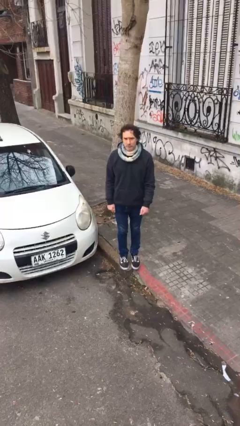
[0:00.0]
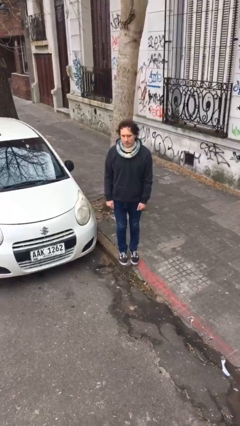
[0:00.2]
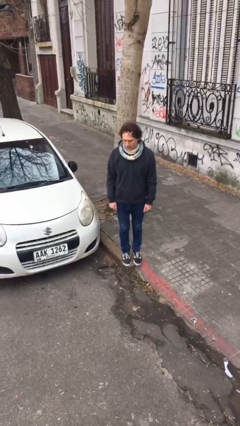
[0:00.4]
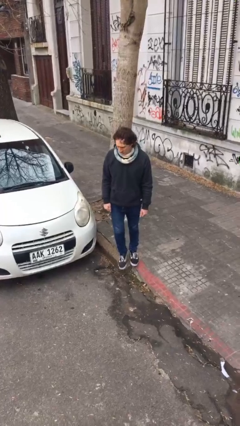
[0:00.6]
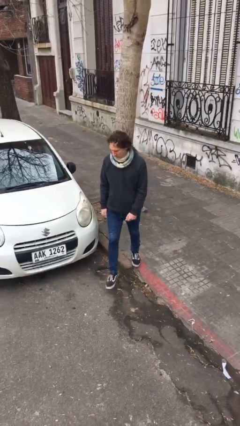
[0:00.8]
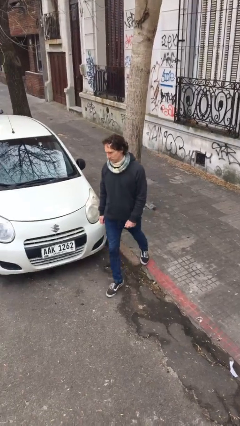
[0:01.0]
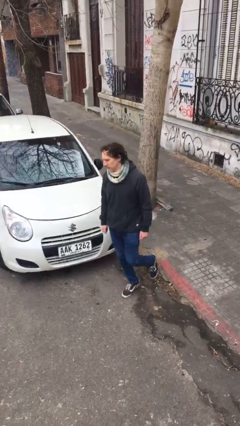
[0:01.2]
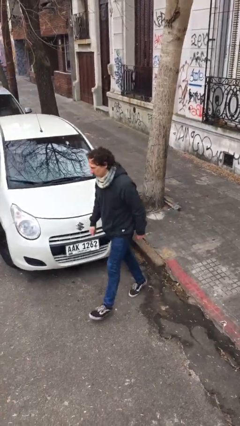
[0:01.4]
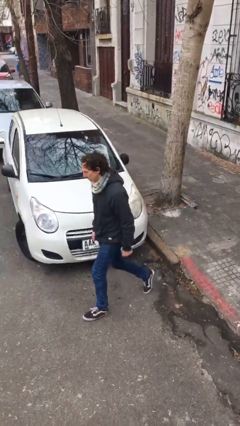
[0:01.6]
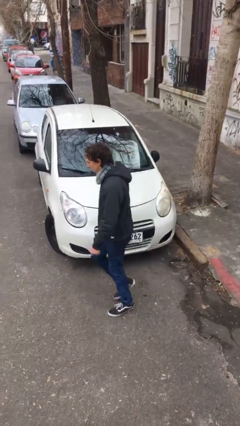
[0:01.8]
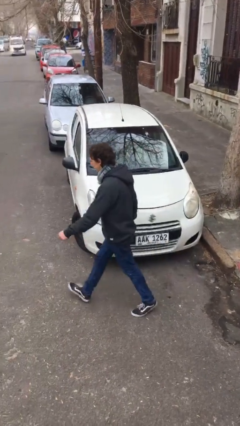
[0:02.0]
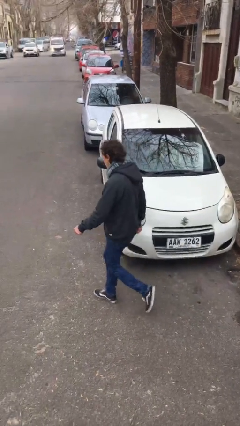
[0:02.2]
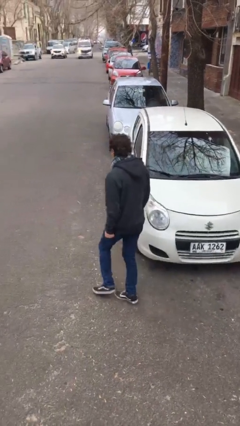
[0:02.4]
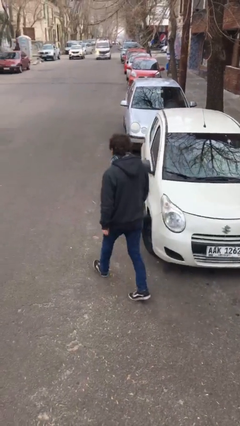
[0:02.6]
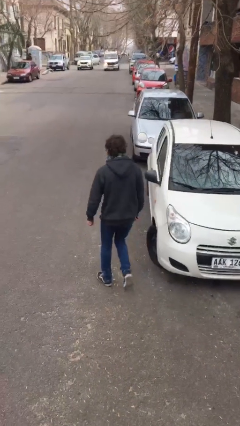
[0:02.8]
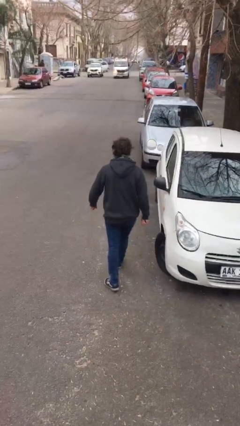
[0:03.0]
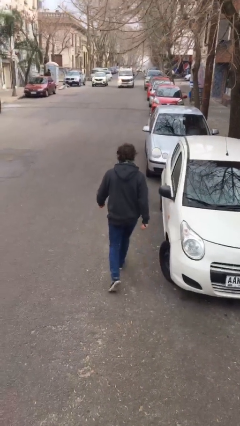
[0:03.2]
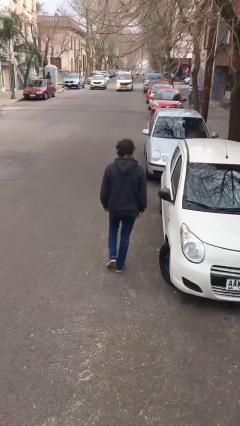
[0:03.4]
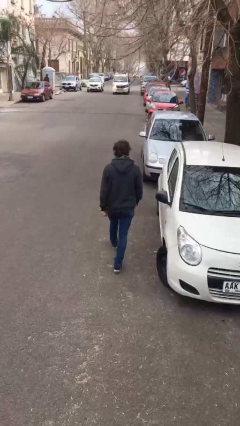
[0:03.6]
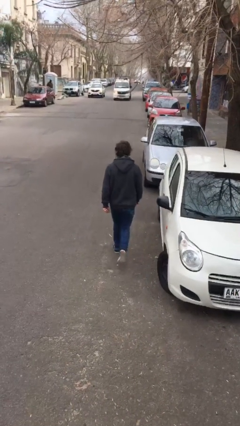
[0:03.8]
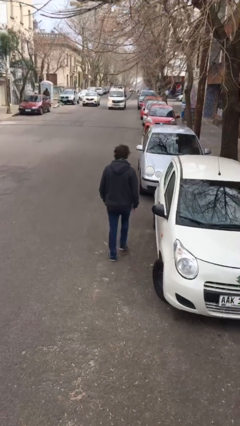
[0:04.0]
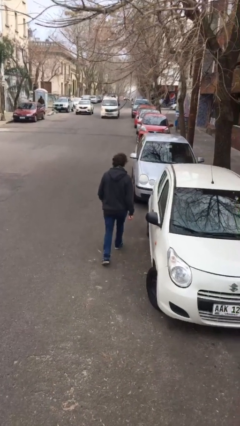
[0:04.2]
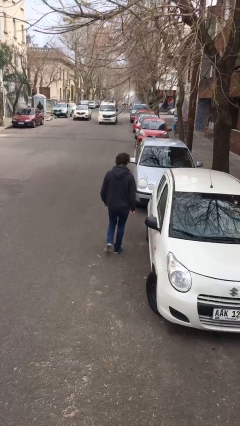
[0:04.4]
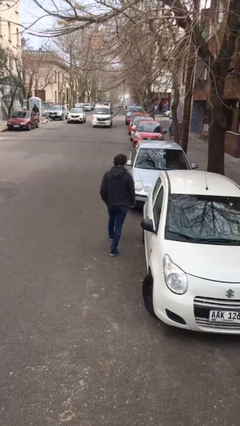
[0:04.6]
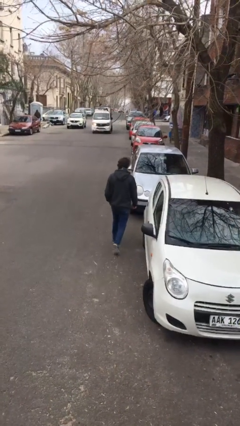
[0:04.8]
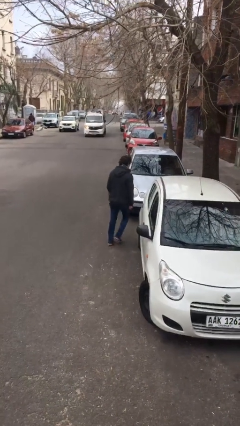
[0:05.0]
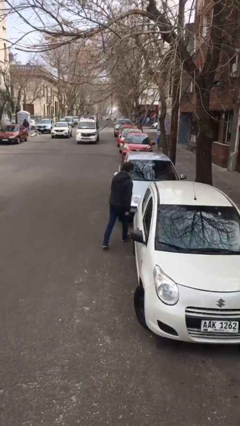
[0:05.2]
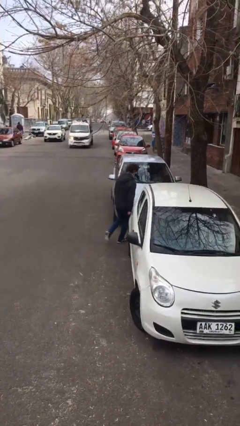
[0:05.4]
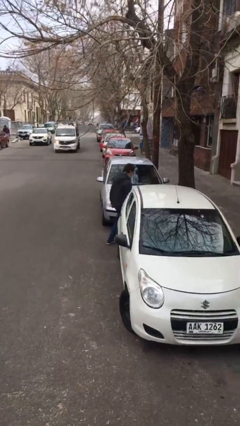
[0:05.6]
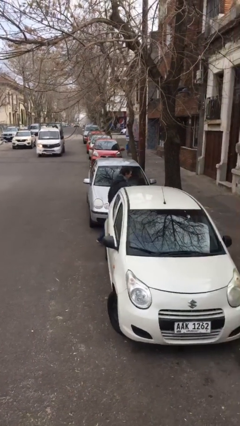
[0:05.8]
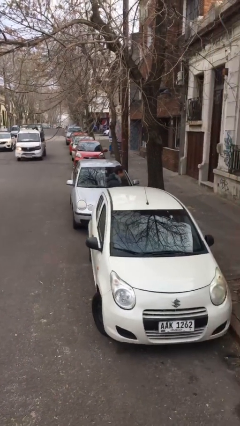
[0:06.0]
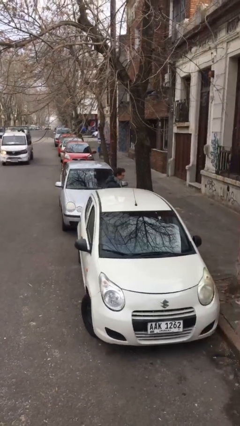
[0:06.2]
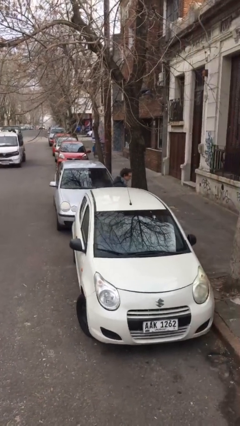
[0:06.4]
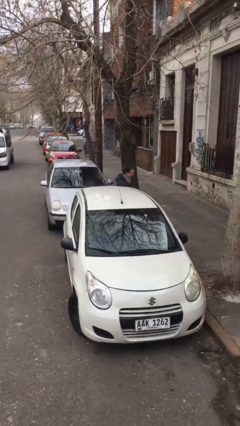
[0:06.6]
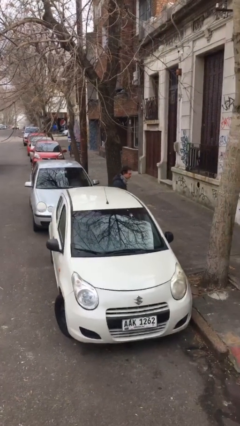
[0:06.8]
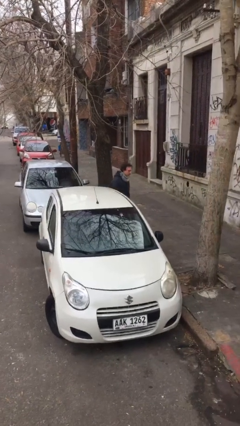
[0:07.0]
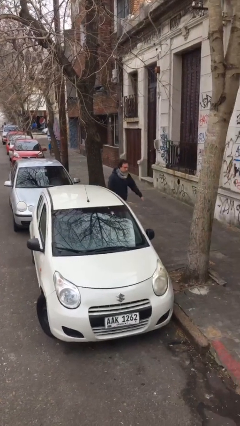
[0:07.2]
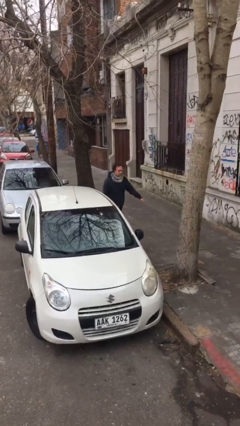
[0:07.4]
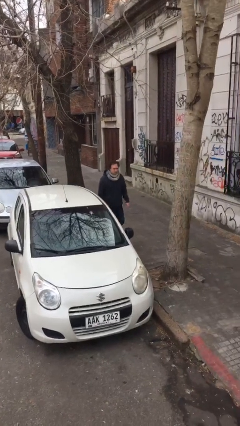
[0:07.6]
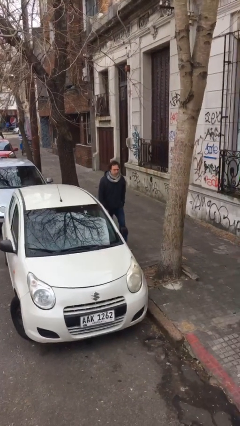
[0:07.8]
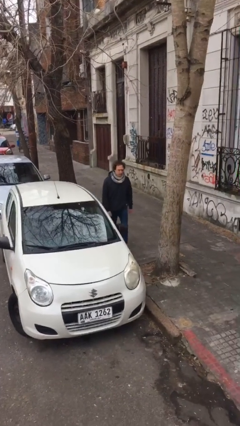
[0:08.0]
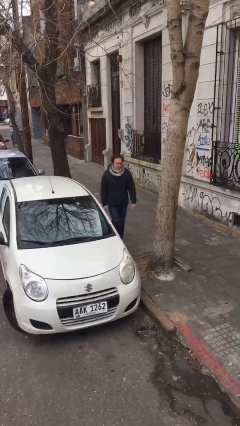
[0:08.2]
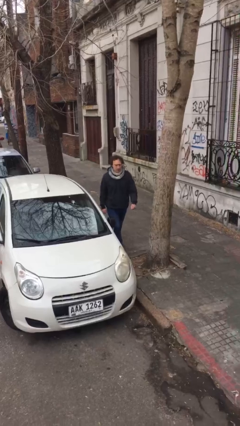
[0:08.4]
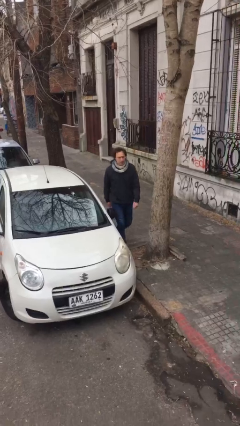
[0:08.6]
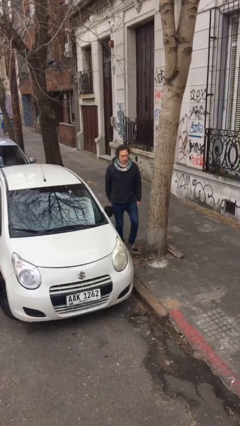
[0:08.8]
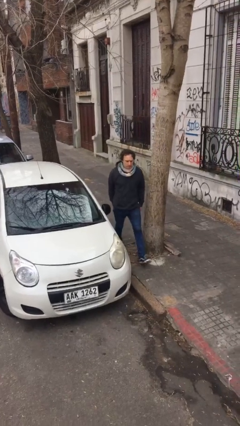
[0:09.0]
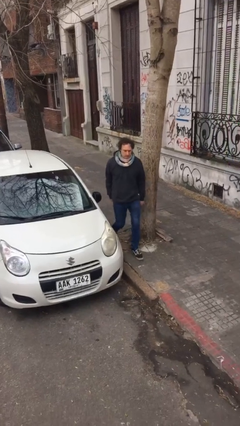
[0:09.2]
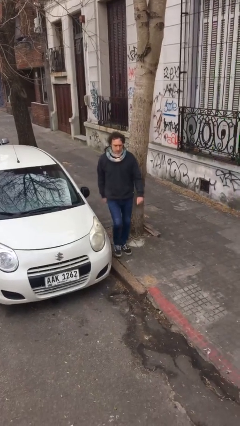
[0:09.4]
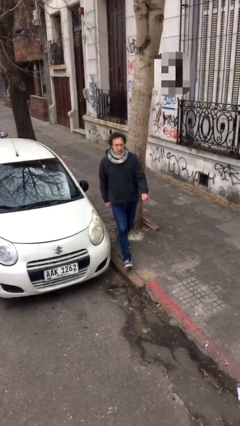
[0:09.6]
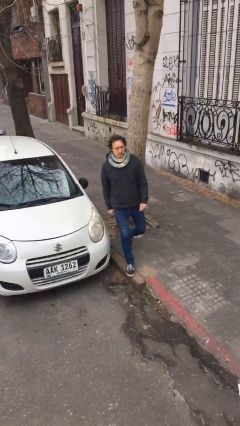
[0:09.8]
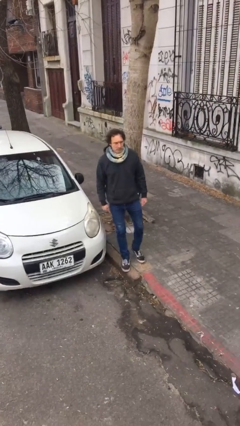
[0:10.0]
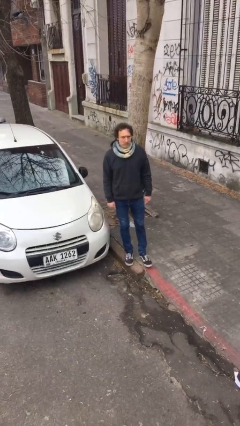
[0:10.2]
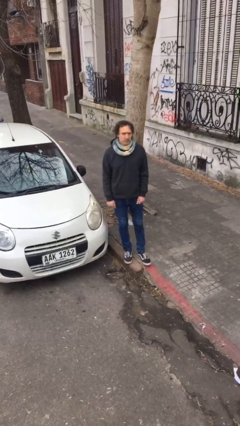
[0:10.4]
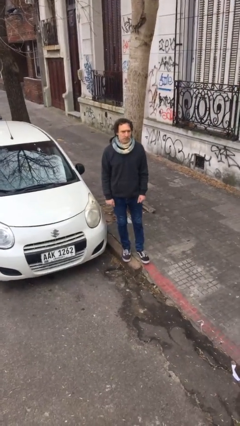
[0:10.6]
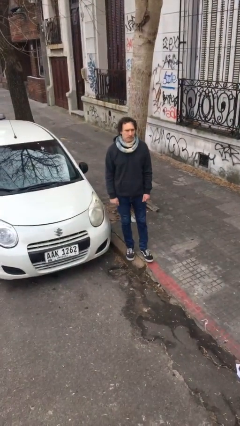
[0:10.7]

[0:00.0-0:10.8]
person walks around car

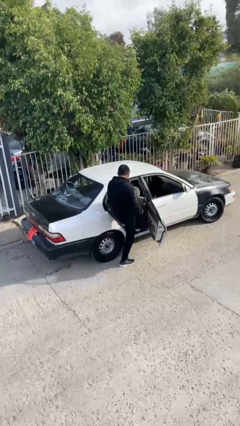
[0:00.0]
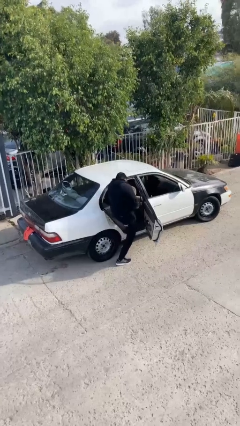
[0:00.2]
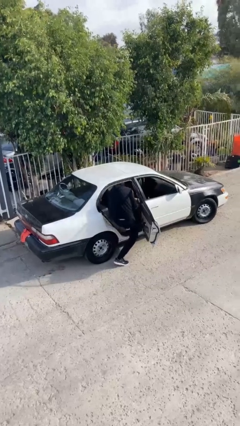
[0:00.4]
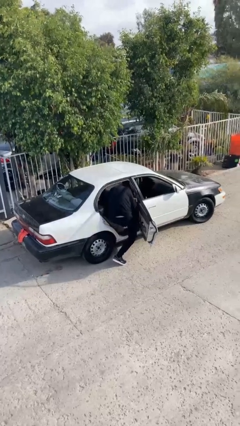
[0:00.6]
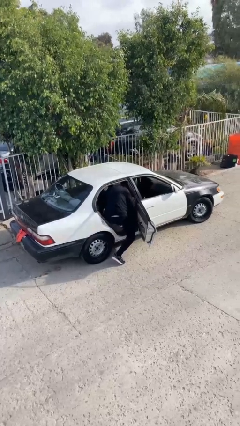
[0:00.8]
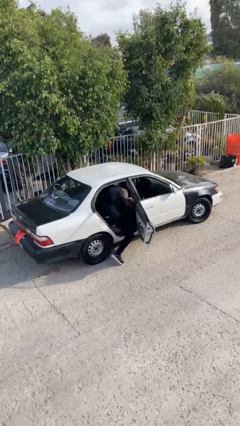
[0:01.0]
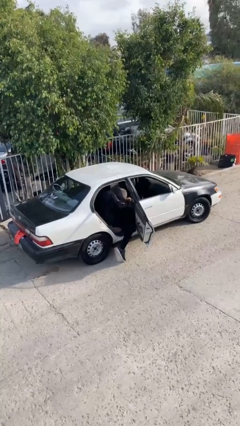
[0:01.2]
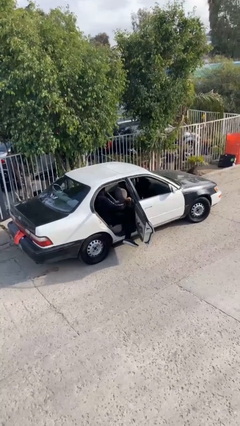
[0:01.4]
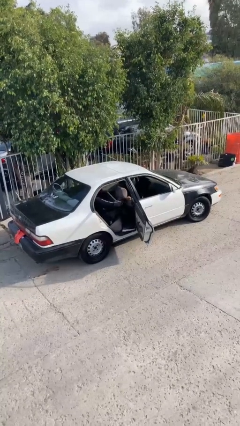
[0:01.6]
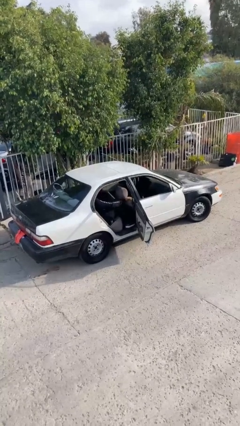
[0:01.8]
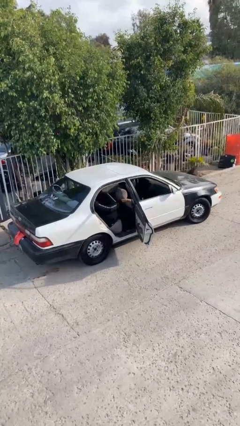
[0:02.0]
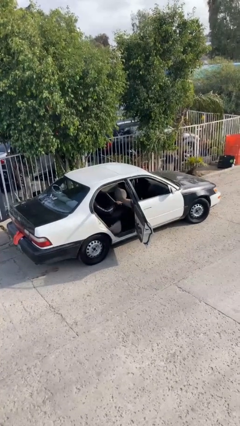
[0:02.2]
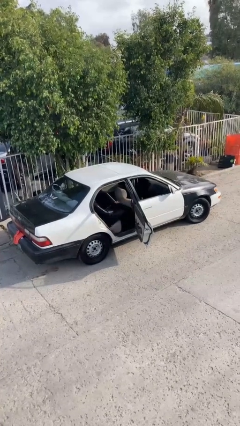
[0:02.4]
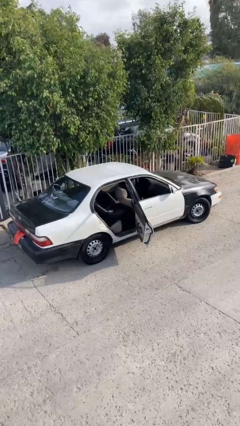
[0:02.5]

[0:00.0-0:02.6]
person enters car

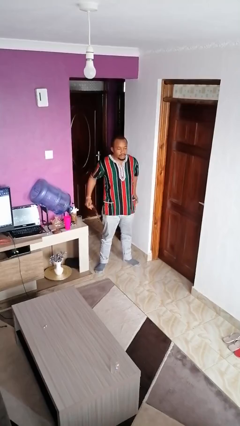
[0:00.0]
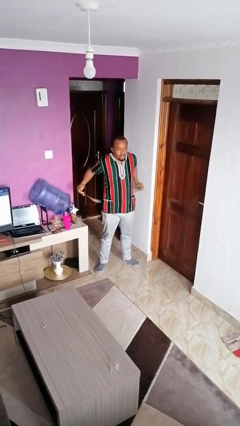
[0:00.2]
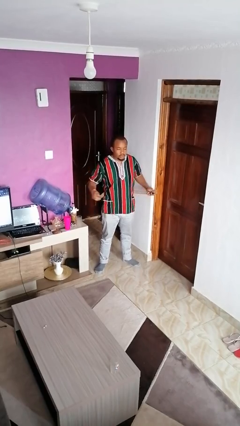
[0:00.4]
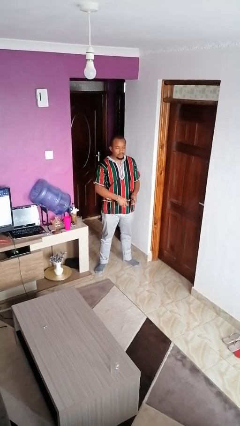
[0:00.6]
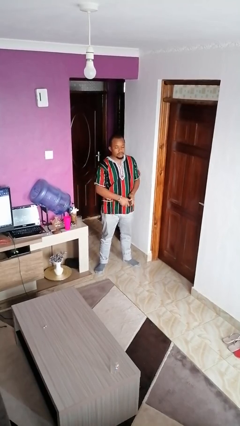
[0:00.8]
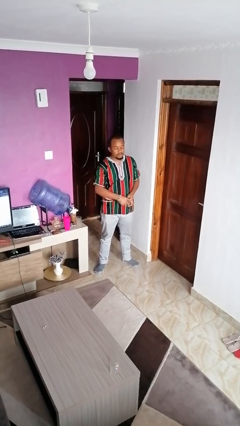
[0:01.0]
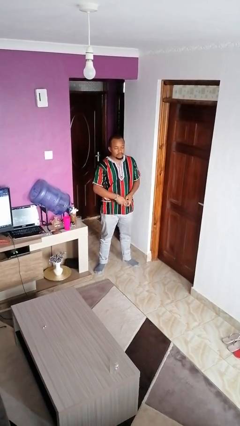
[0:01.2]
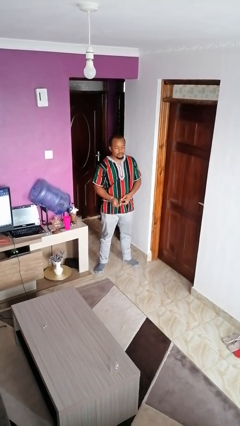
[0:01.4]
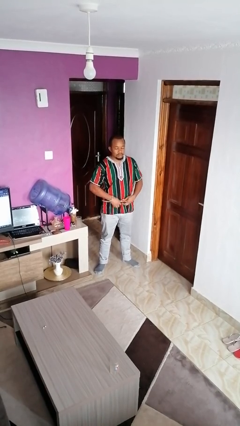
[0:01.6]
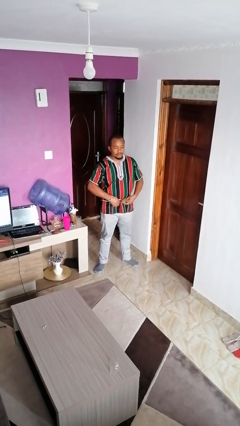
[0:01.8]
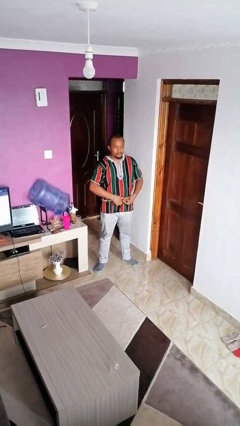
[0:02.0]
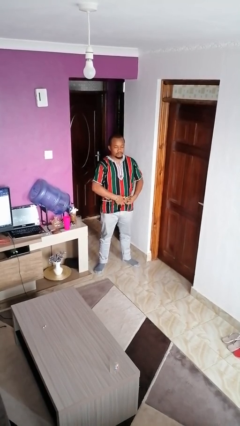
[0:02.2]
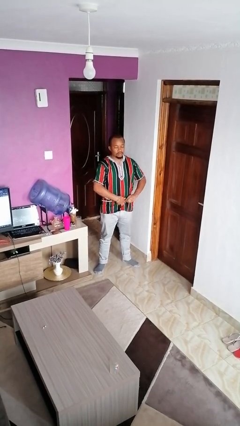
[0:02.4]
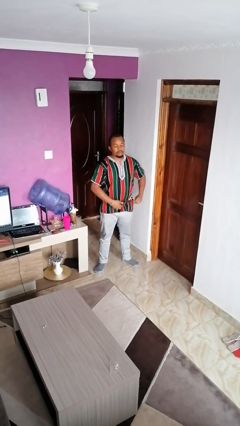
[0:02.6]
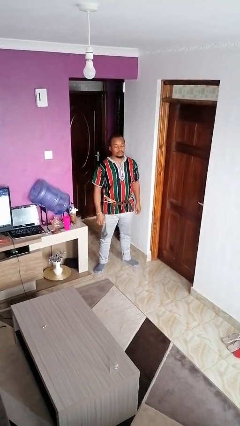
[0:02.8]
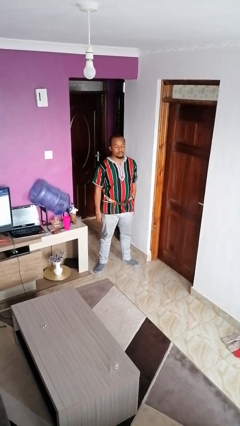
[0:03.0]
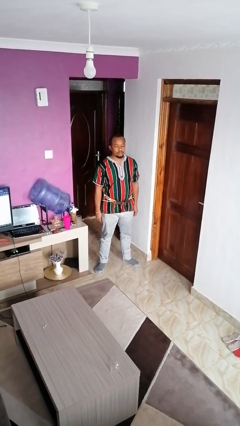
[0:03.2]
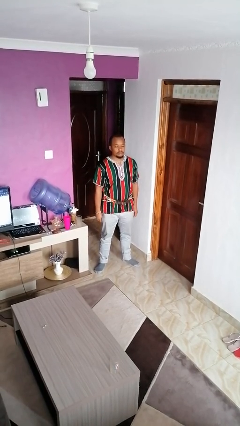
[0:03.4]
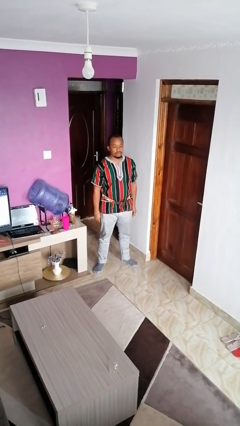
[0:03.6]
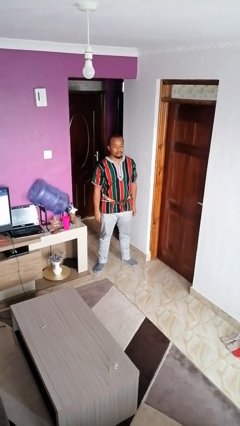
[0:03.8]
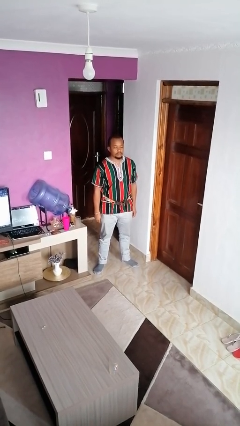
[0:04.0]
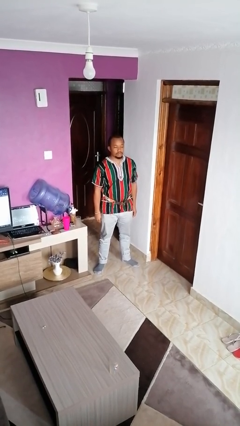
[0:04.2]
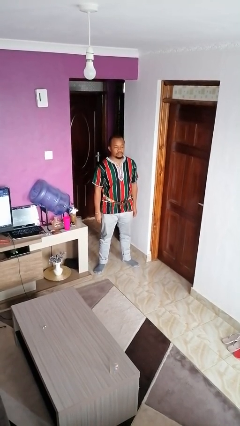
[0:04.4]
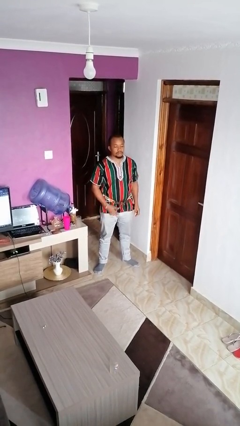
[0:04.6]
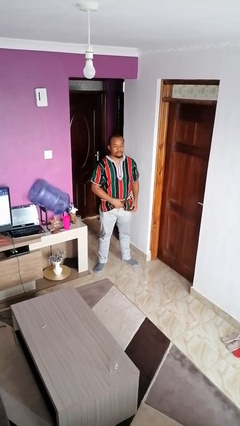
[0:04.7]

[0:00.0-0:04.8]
person puts on belt
